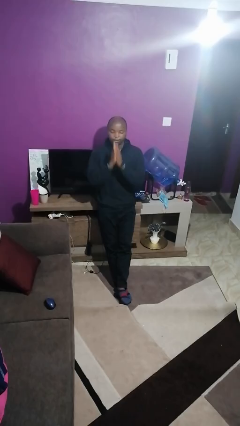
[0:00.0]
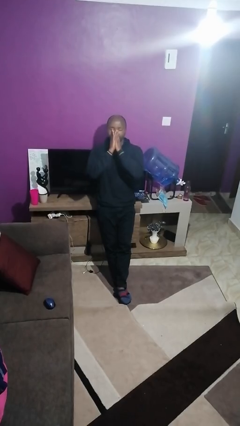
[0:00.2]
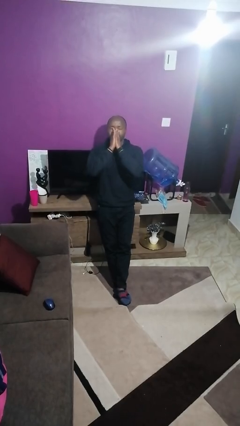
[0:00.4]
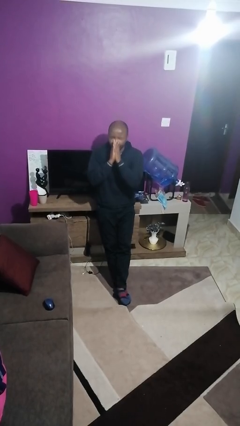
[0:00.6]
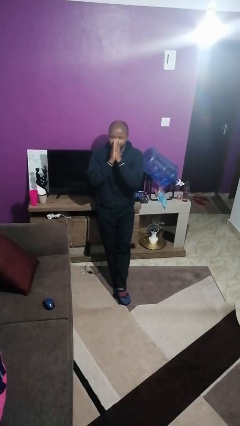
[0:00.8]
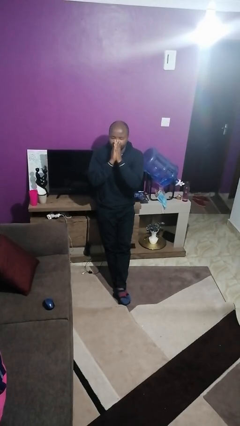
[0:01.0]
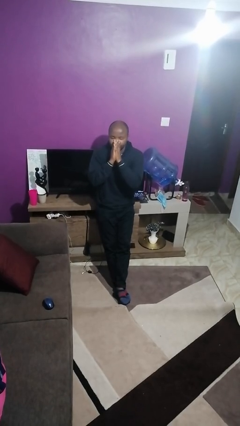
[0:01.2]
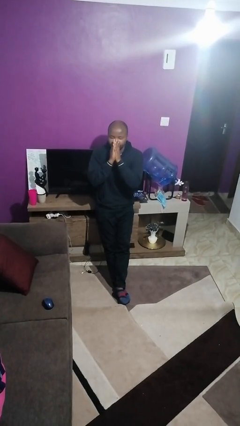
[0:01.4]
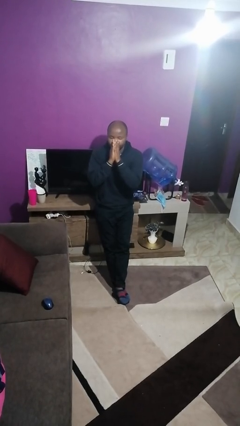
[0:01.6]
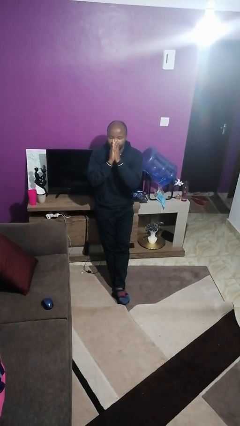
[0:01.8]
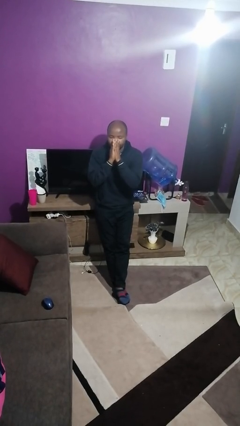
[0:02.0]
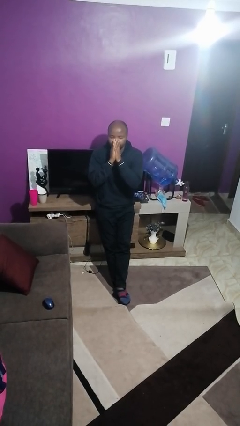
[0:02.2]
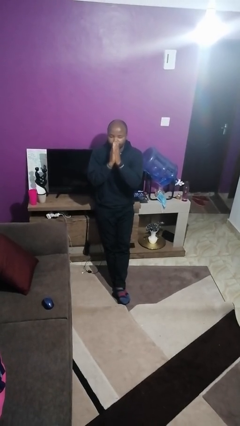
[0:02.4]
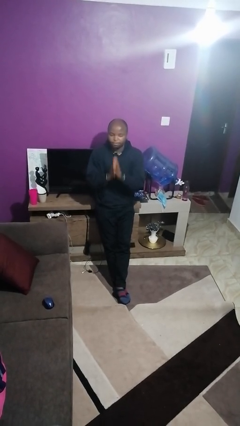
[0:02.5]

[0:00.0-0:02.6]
person sneezes into hand

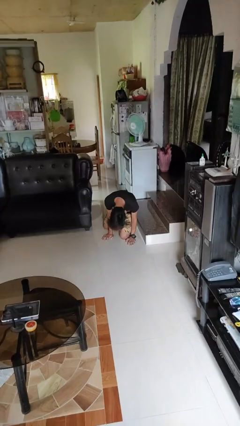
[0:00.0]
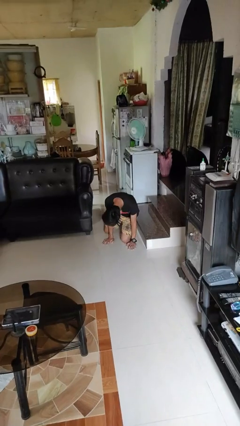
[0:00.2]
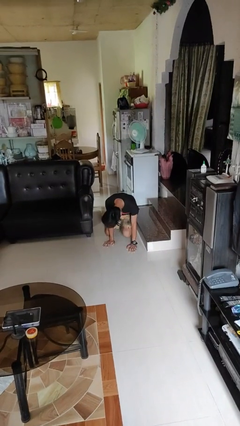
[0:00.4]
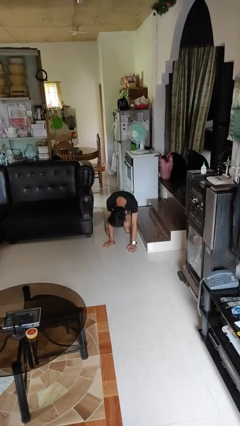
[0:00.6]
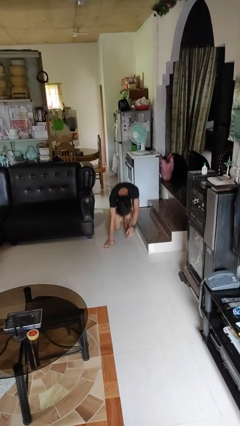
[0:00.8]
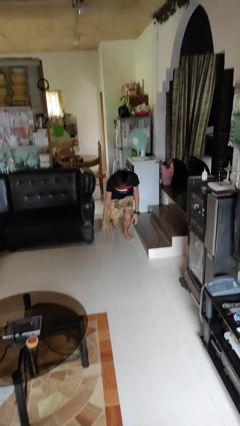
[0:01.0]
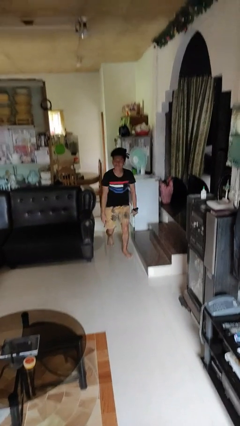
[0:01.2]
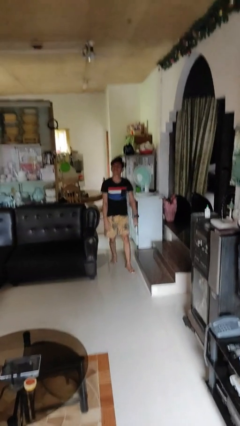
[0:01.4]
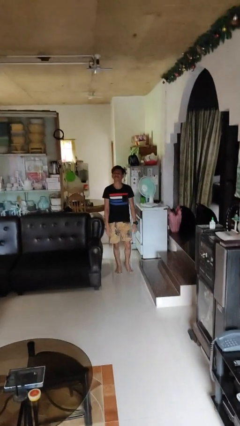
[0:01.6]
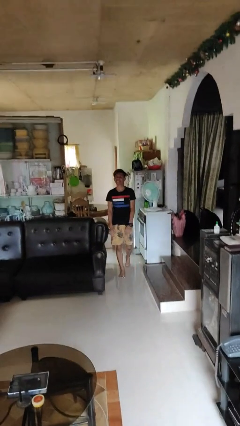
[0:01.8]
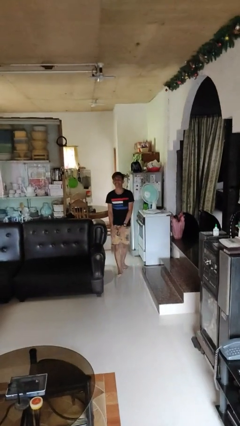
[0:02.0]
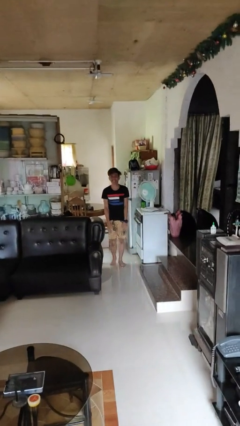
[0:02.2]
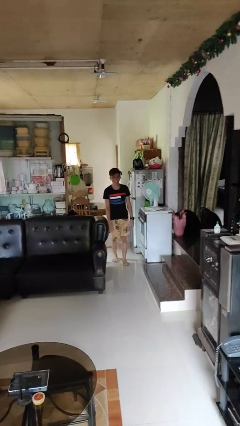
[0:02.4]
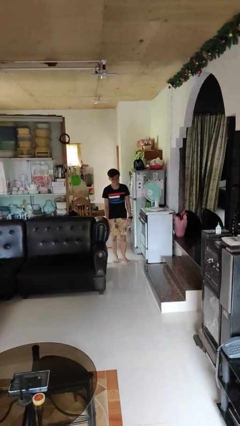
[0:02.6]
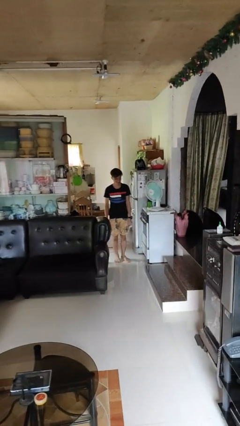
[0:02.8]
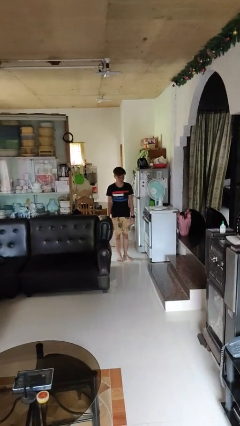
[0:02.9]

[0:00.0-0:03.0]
person stands up from floor

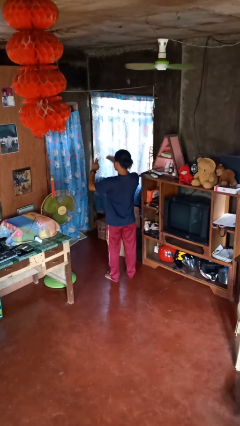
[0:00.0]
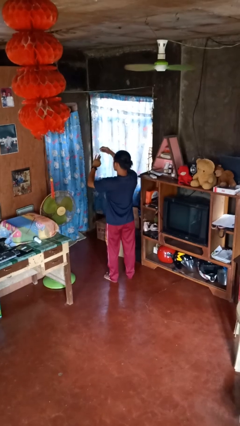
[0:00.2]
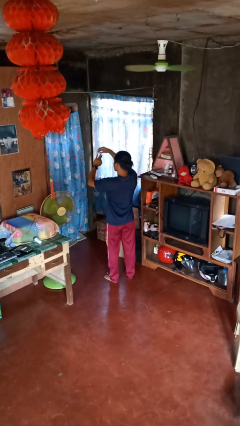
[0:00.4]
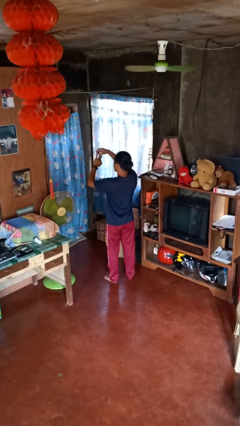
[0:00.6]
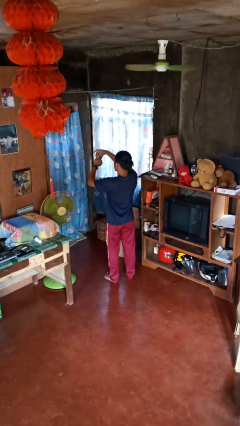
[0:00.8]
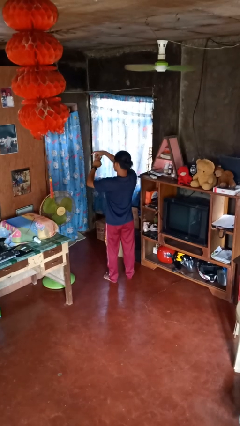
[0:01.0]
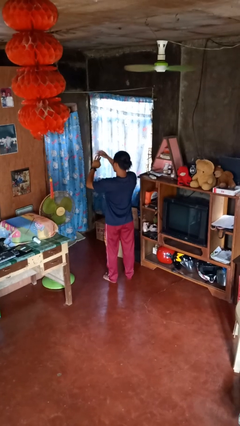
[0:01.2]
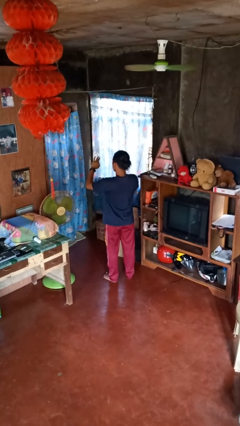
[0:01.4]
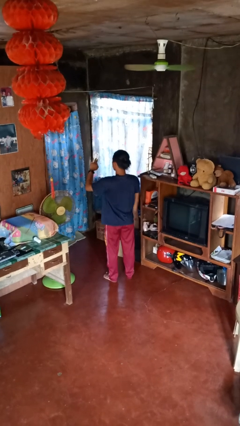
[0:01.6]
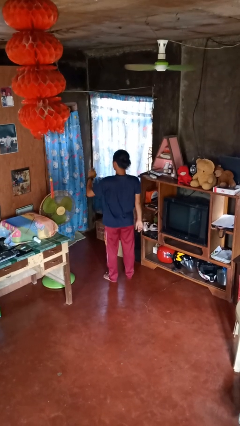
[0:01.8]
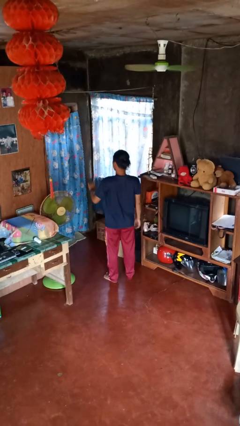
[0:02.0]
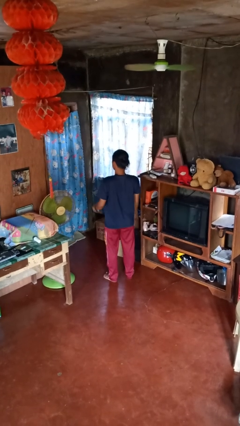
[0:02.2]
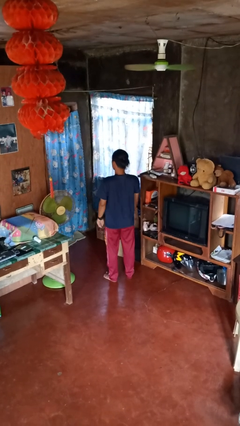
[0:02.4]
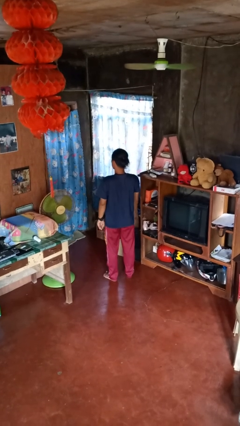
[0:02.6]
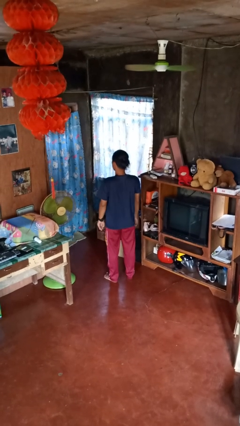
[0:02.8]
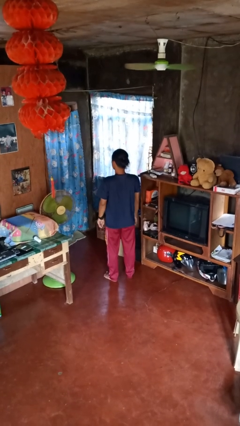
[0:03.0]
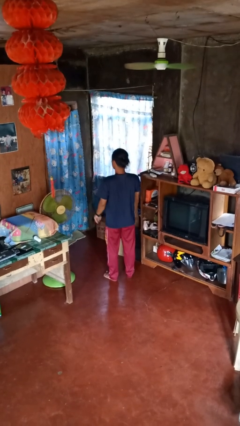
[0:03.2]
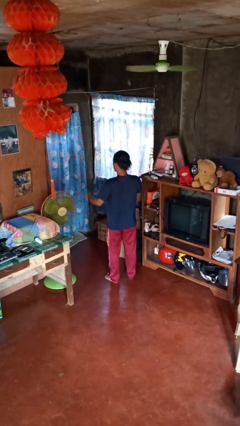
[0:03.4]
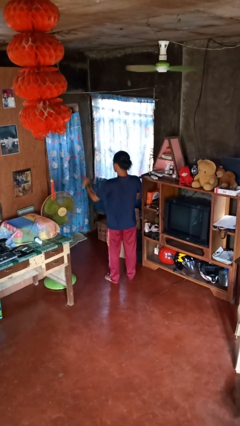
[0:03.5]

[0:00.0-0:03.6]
person puts on ring

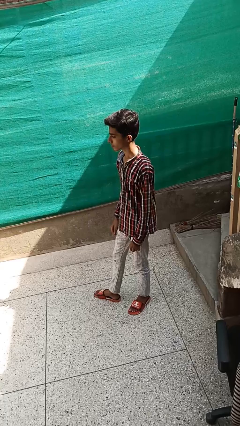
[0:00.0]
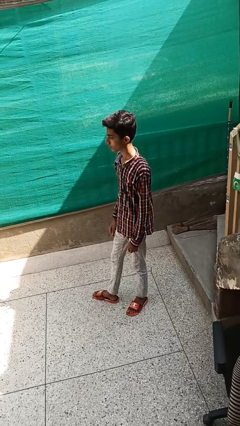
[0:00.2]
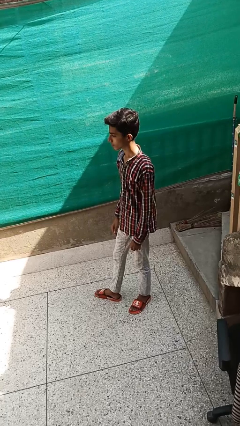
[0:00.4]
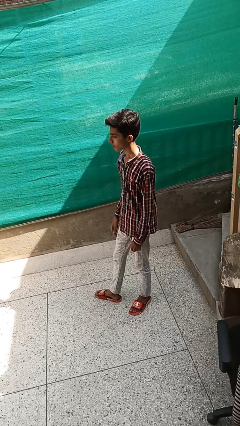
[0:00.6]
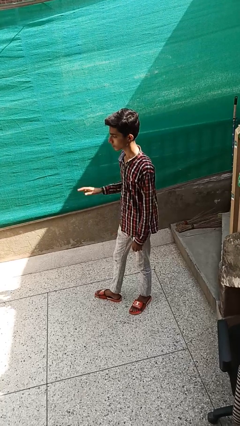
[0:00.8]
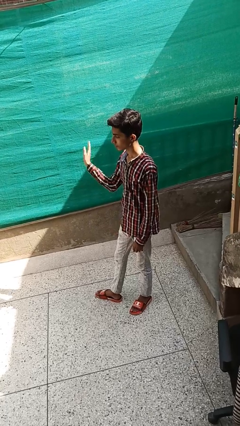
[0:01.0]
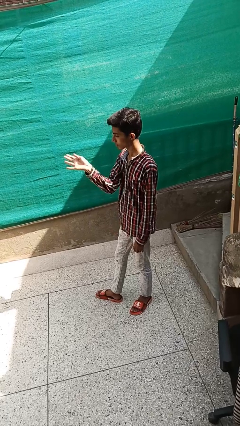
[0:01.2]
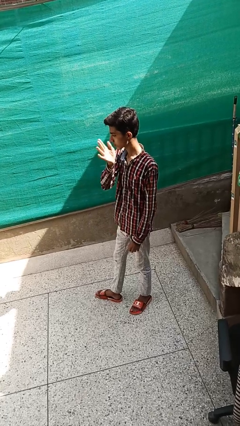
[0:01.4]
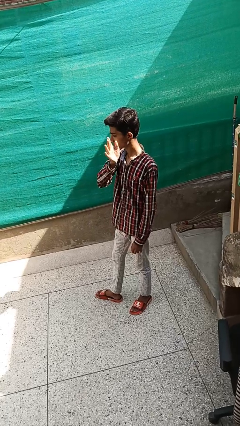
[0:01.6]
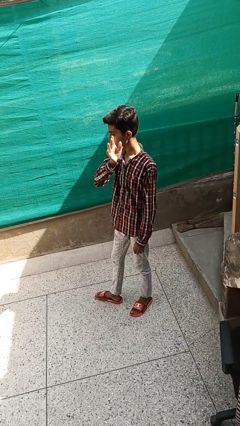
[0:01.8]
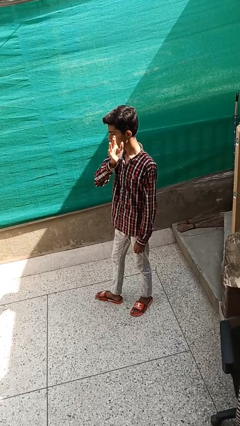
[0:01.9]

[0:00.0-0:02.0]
person gestures swipe left

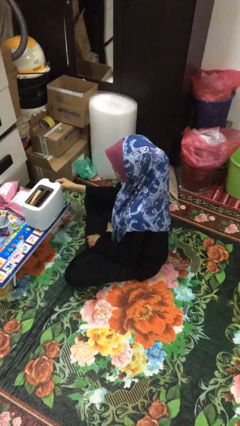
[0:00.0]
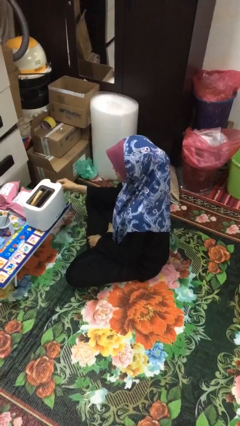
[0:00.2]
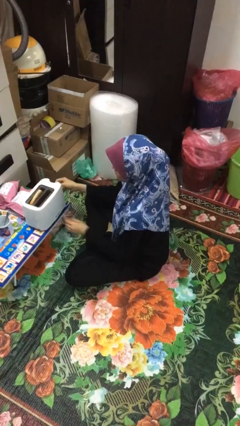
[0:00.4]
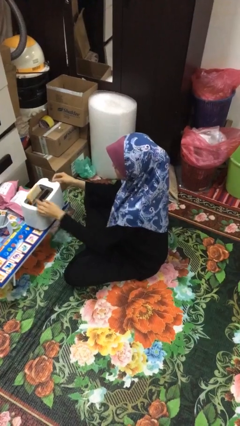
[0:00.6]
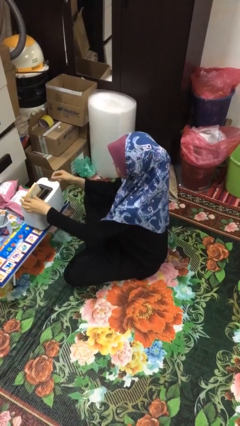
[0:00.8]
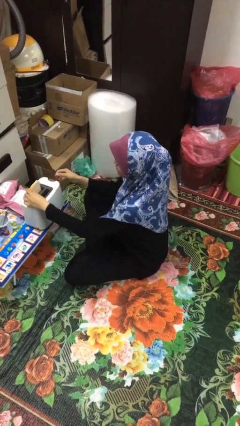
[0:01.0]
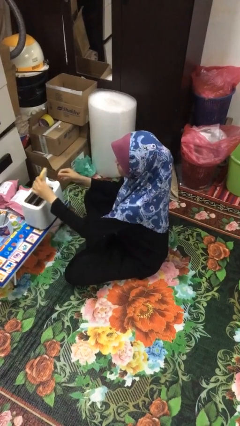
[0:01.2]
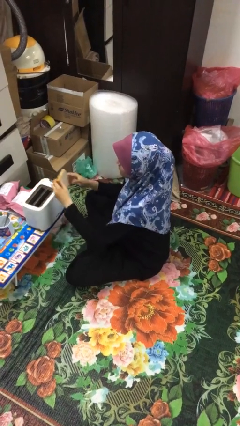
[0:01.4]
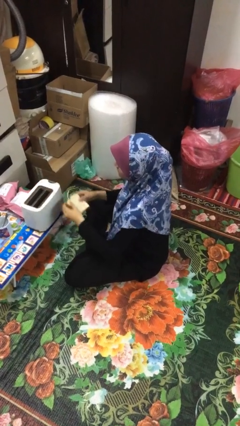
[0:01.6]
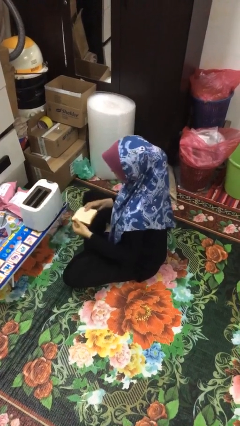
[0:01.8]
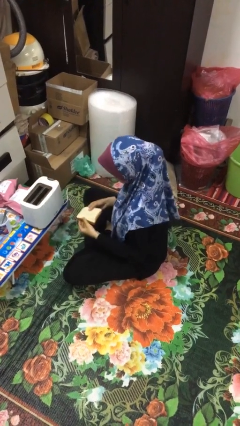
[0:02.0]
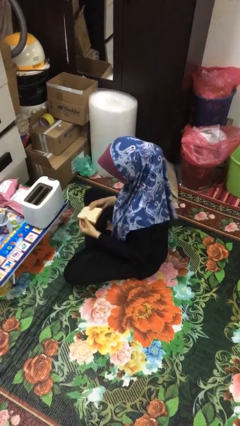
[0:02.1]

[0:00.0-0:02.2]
person takes object from toaster

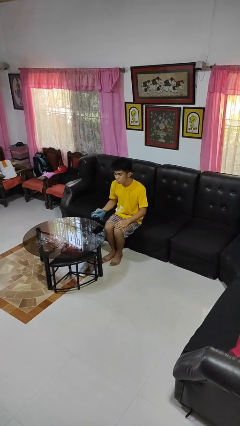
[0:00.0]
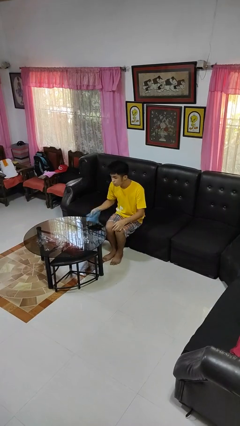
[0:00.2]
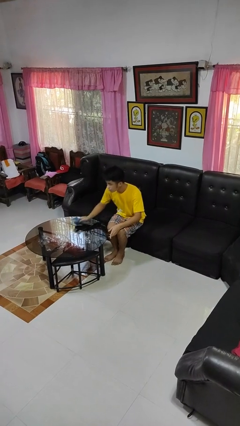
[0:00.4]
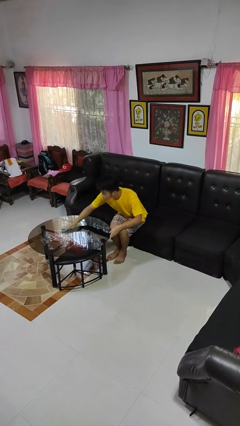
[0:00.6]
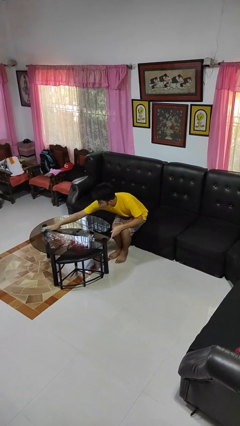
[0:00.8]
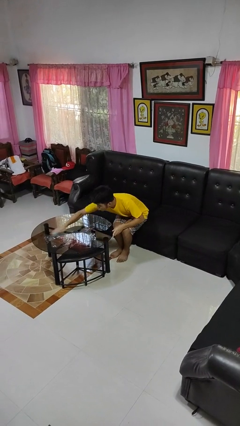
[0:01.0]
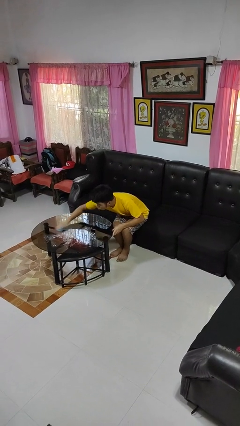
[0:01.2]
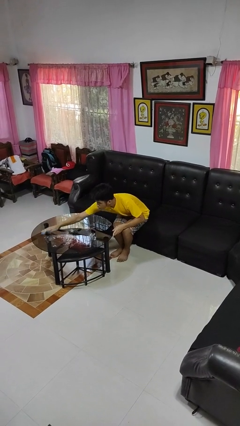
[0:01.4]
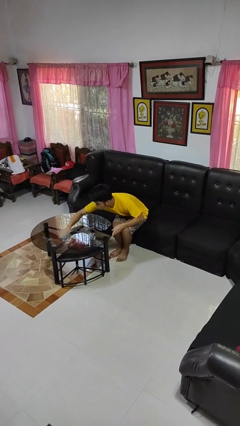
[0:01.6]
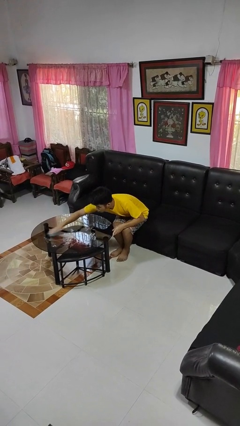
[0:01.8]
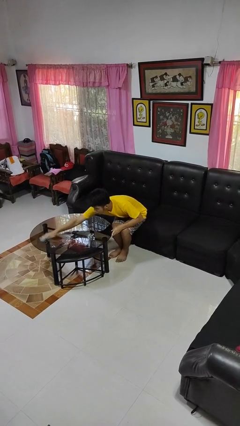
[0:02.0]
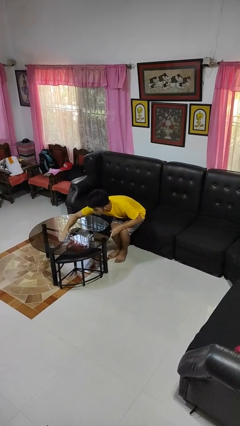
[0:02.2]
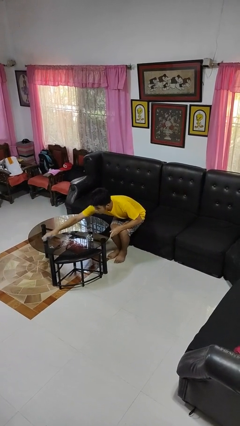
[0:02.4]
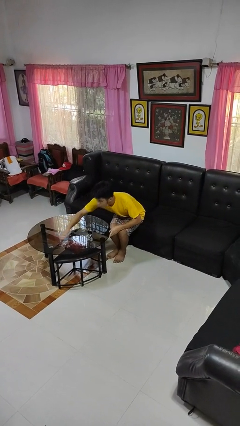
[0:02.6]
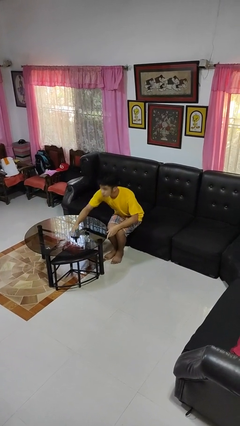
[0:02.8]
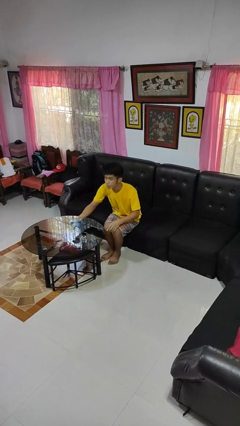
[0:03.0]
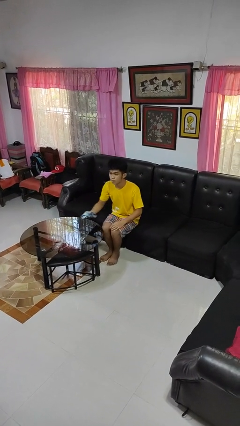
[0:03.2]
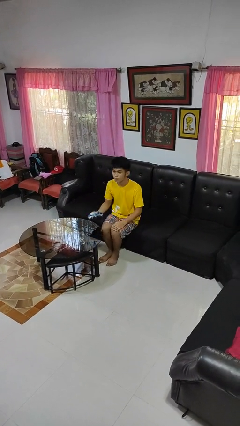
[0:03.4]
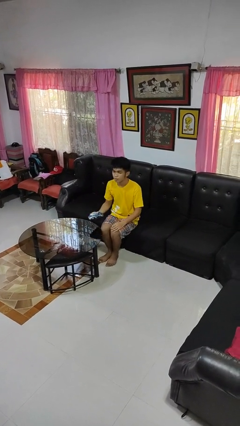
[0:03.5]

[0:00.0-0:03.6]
person cleans table with rag

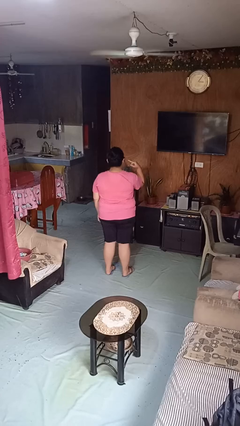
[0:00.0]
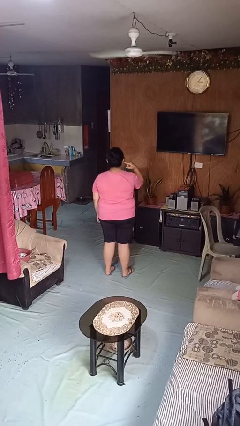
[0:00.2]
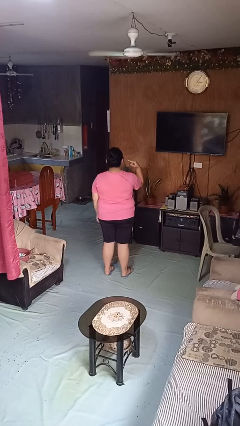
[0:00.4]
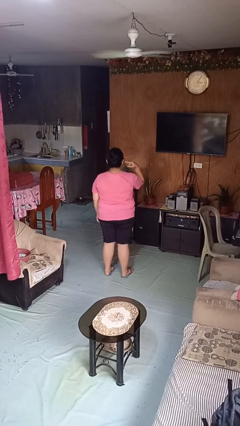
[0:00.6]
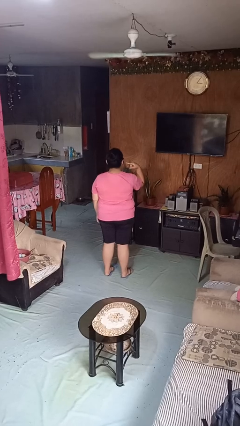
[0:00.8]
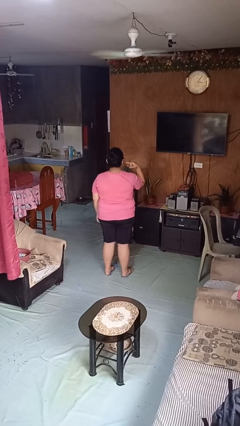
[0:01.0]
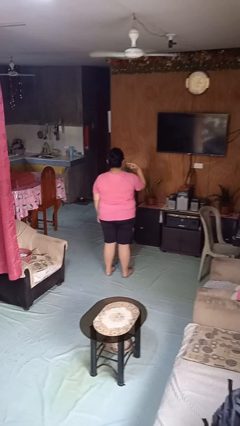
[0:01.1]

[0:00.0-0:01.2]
person gestures listen closely
